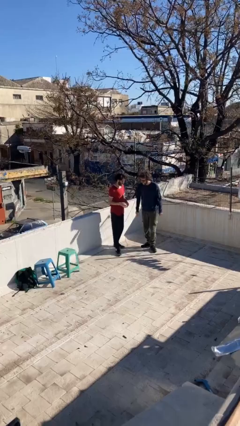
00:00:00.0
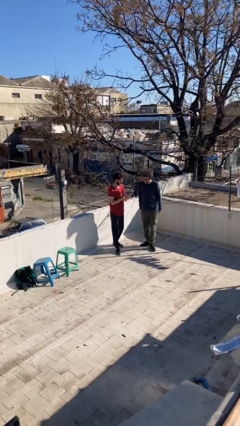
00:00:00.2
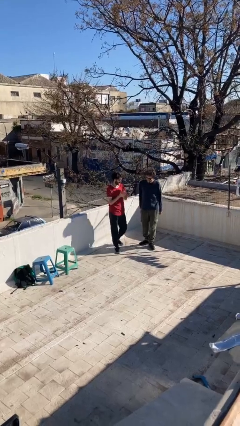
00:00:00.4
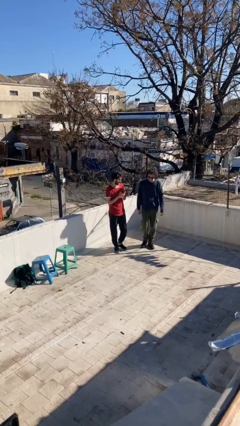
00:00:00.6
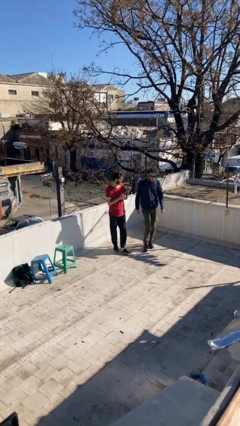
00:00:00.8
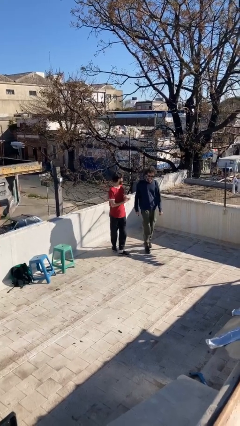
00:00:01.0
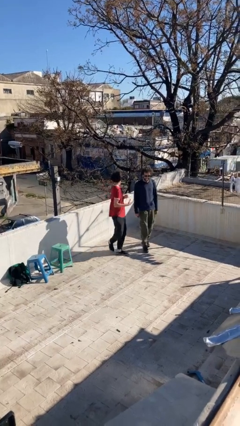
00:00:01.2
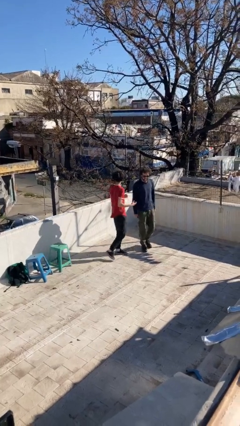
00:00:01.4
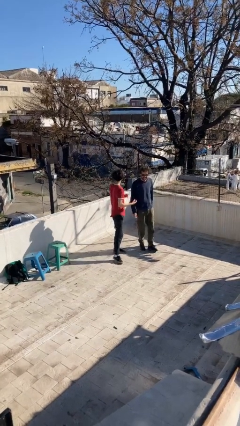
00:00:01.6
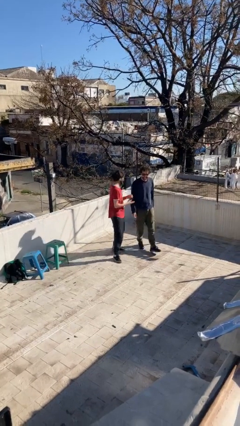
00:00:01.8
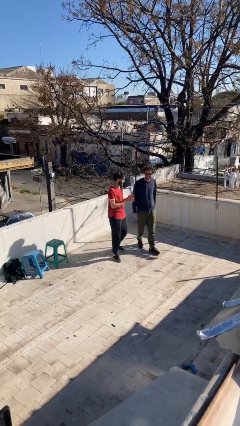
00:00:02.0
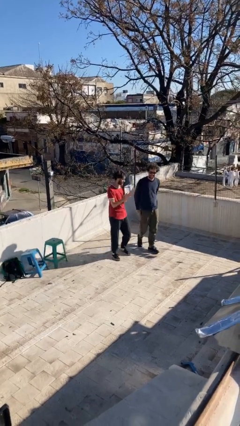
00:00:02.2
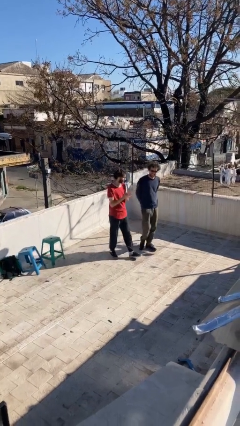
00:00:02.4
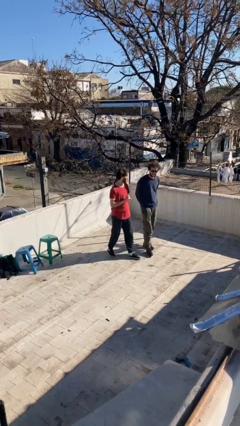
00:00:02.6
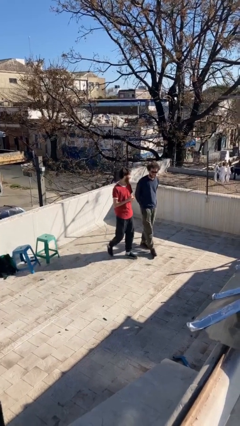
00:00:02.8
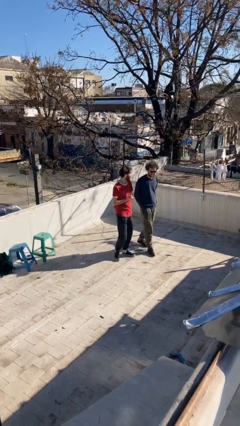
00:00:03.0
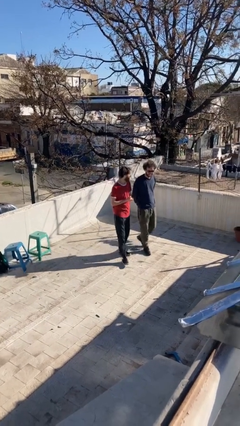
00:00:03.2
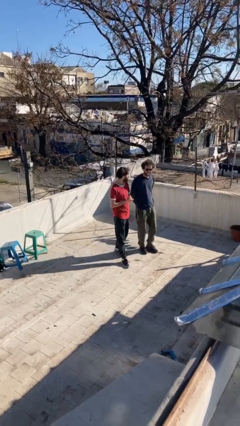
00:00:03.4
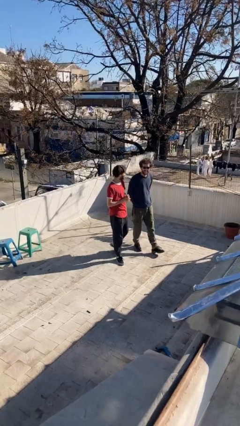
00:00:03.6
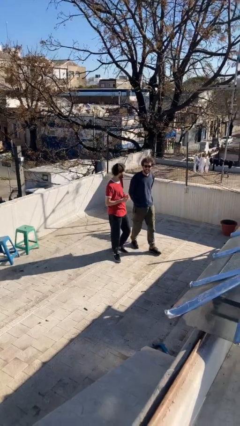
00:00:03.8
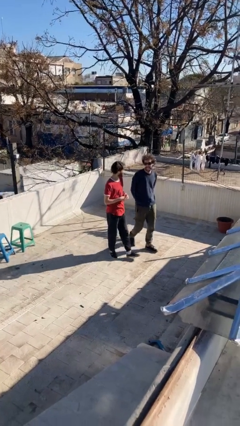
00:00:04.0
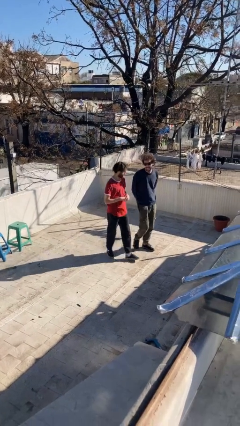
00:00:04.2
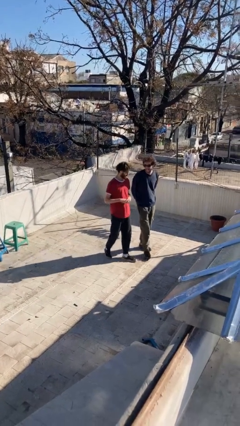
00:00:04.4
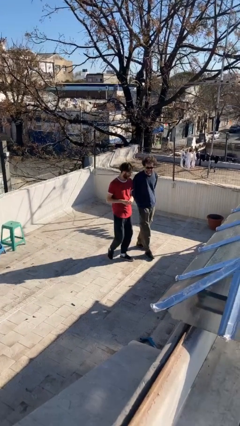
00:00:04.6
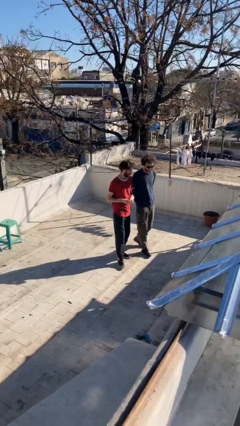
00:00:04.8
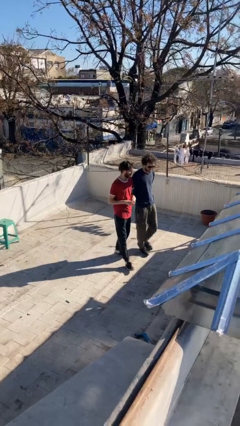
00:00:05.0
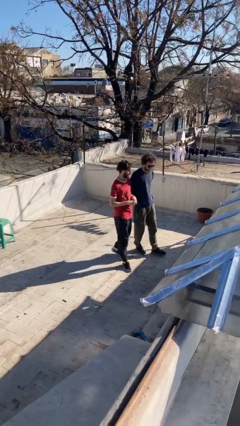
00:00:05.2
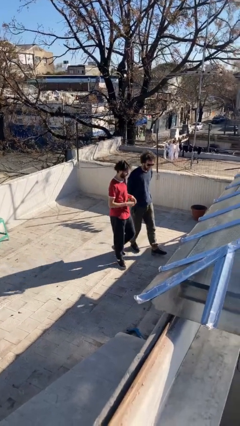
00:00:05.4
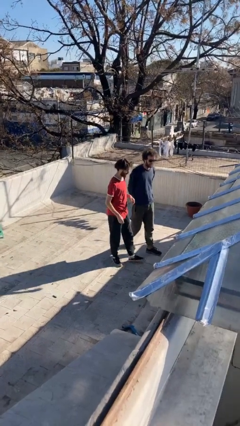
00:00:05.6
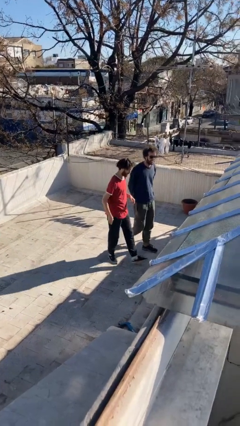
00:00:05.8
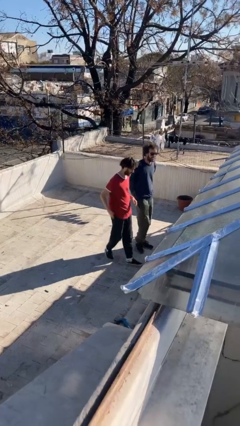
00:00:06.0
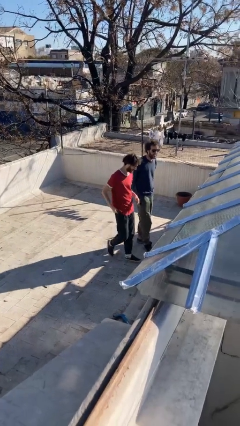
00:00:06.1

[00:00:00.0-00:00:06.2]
person talks to person

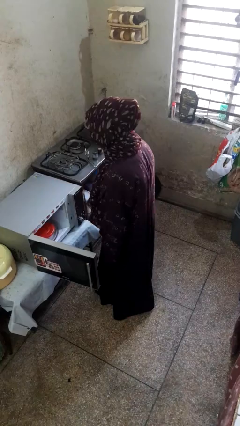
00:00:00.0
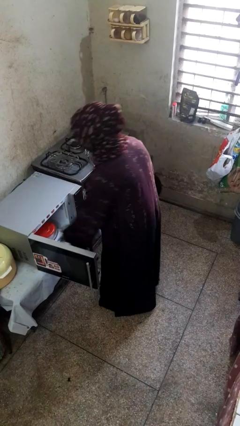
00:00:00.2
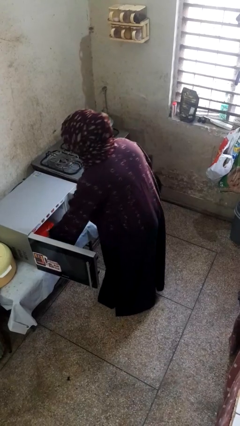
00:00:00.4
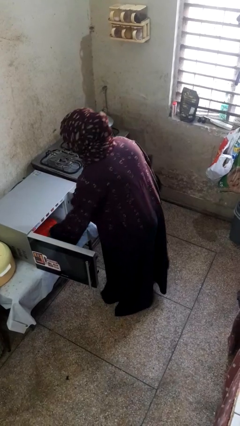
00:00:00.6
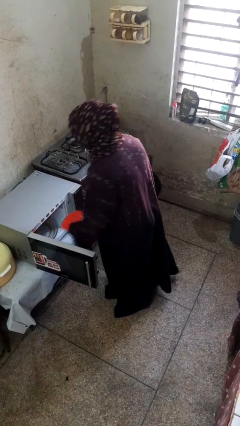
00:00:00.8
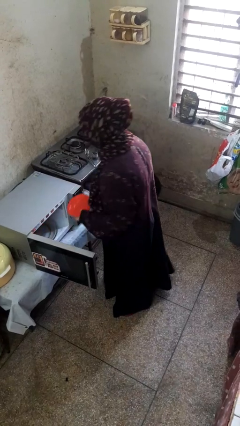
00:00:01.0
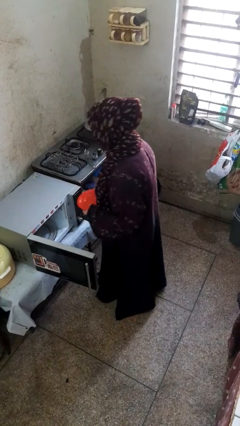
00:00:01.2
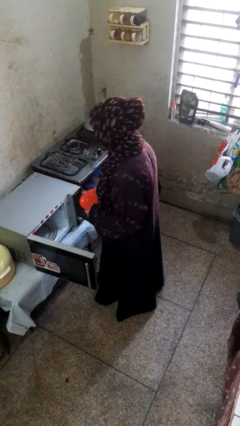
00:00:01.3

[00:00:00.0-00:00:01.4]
person takes object from microwave

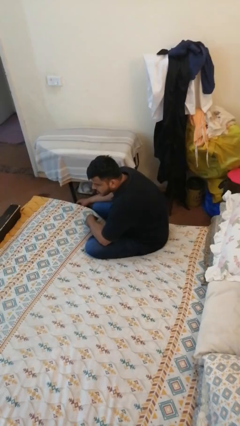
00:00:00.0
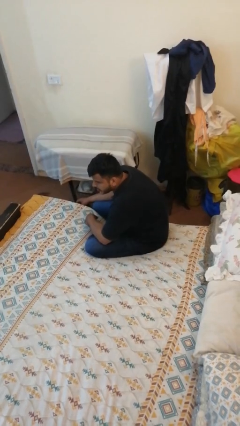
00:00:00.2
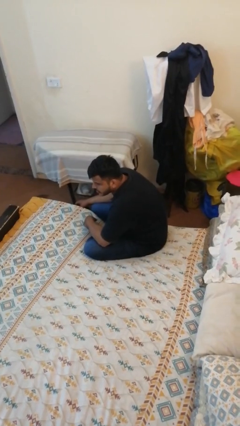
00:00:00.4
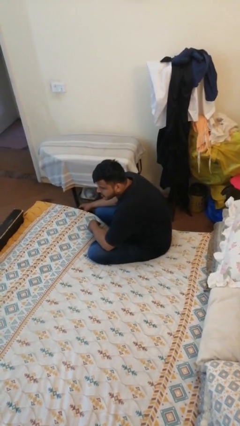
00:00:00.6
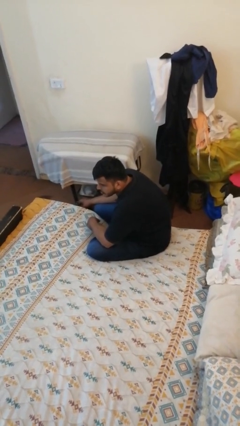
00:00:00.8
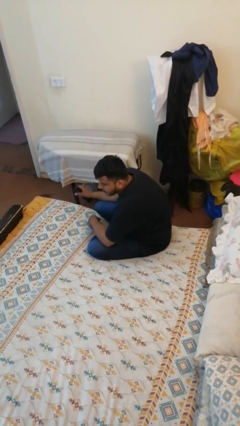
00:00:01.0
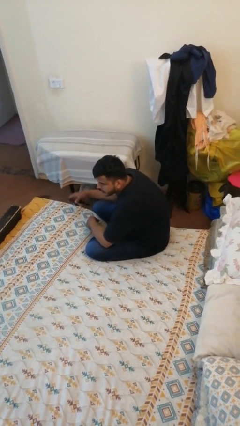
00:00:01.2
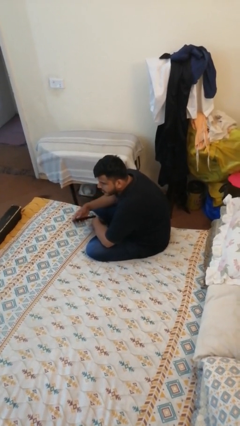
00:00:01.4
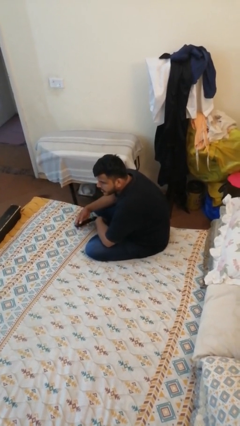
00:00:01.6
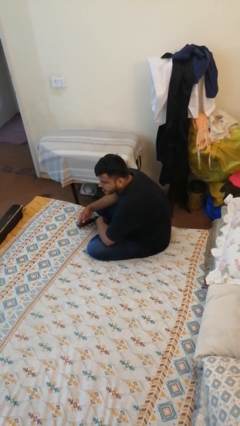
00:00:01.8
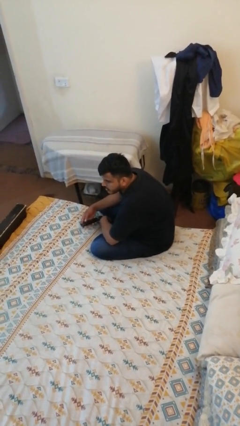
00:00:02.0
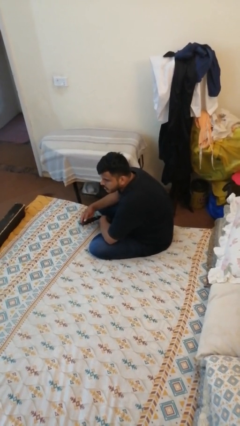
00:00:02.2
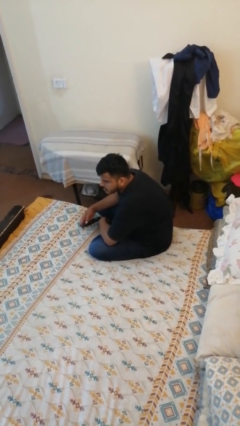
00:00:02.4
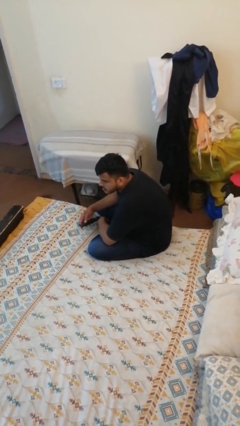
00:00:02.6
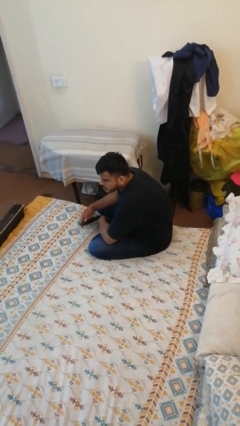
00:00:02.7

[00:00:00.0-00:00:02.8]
person uses television remote

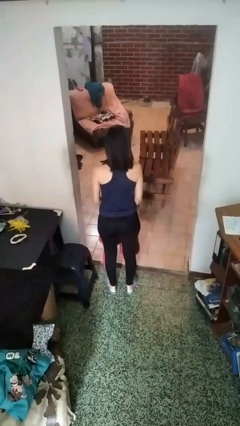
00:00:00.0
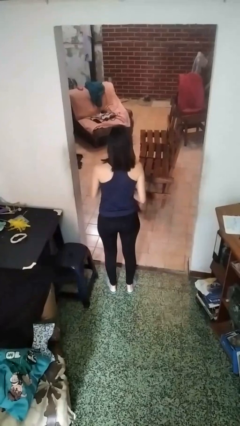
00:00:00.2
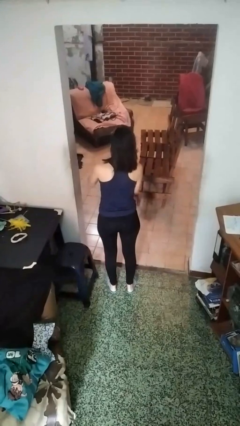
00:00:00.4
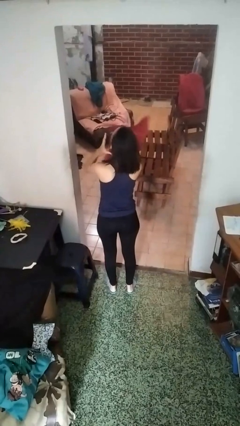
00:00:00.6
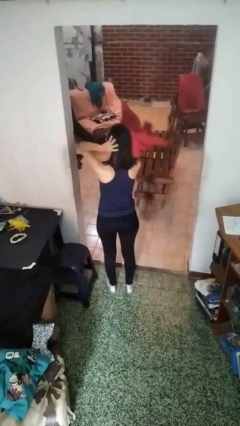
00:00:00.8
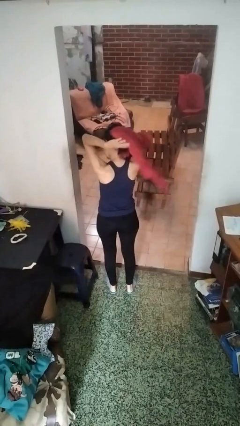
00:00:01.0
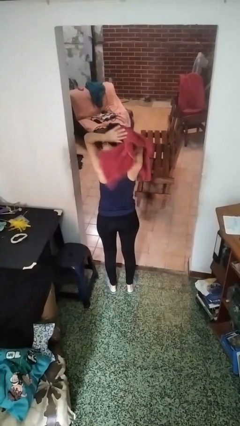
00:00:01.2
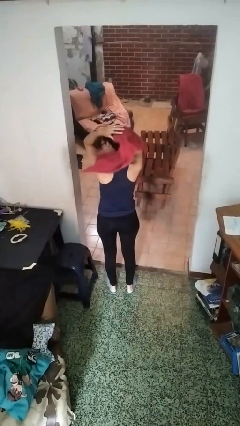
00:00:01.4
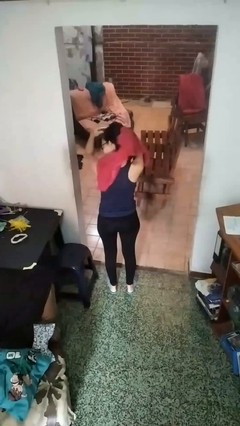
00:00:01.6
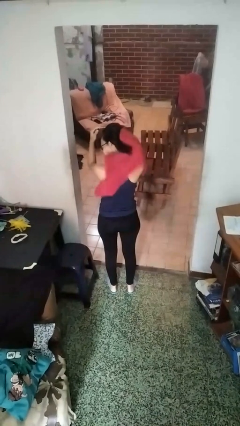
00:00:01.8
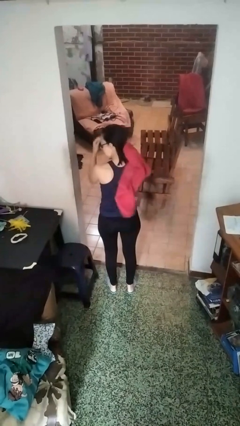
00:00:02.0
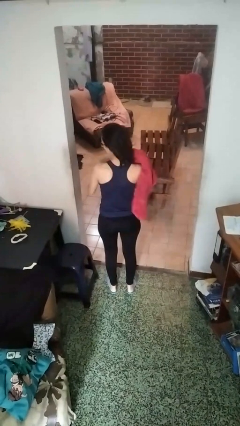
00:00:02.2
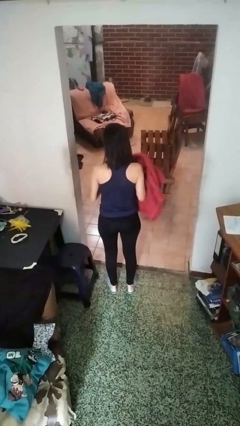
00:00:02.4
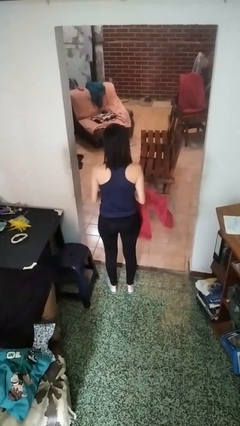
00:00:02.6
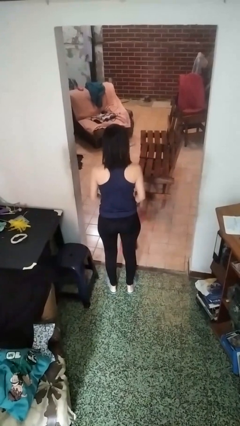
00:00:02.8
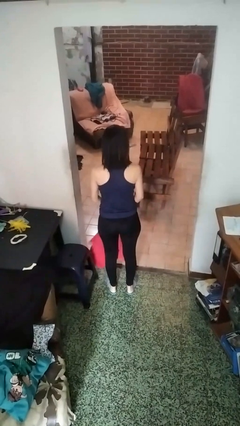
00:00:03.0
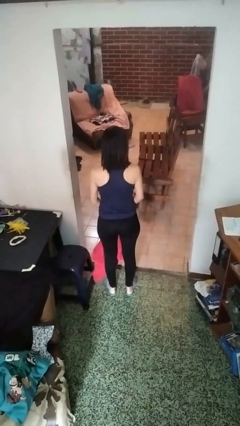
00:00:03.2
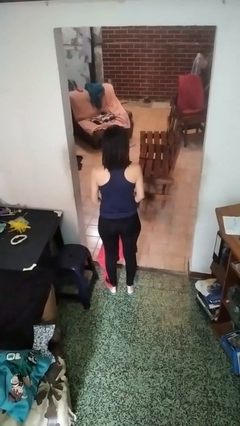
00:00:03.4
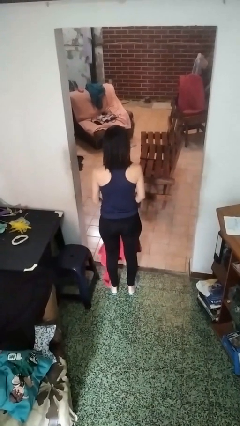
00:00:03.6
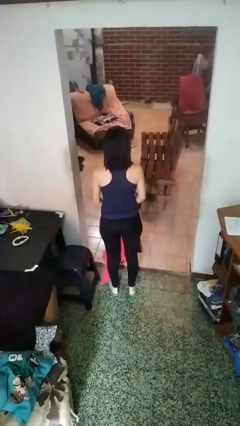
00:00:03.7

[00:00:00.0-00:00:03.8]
person dries hair with towel

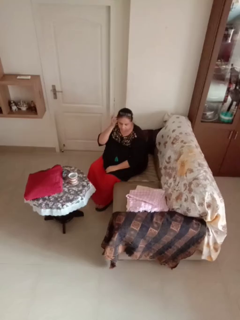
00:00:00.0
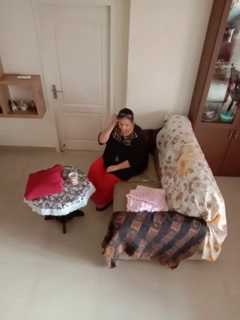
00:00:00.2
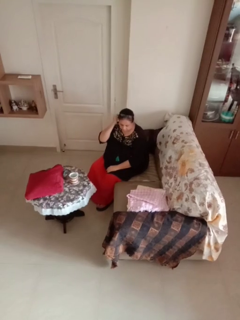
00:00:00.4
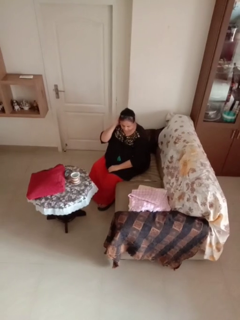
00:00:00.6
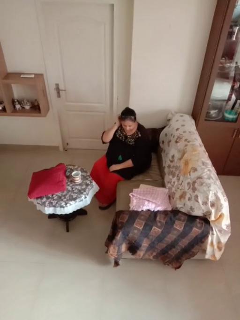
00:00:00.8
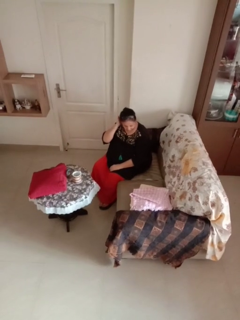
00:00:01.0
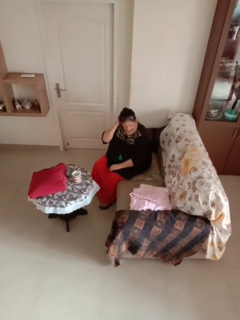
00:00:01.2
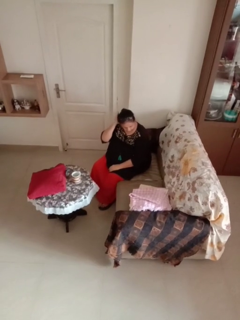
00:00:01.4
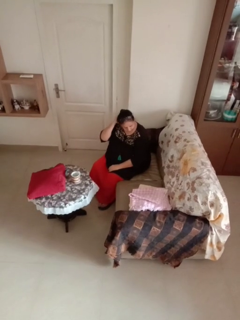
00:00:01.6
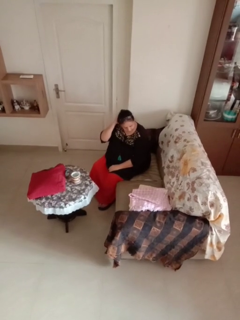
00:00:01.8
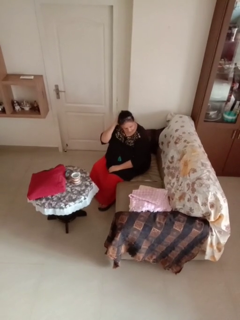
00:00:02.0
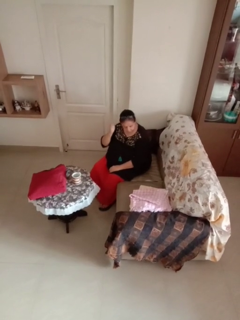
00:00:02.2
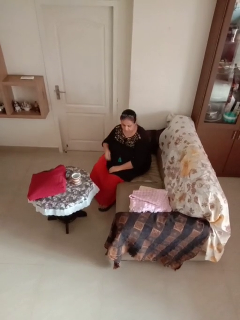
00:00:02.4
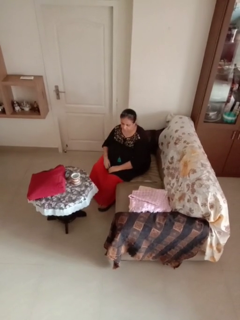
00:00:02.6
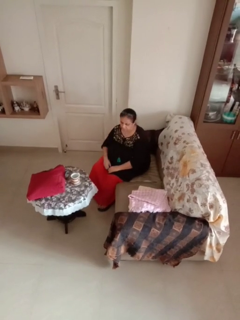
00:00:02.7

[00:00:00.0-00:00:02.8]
person strokes hair

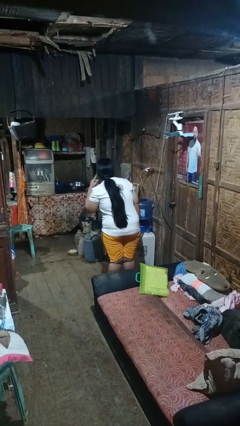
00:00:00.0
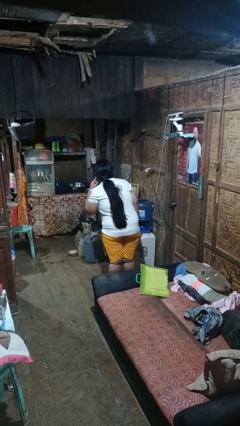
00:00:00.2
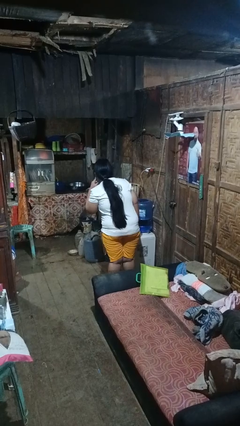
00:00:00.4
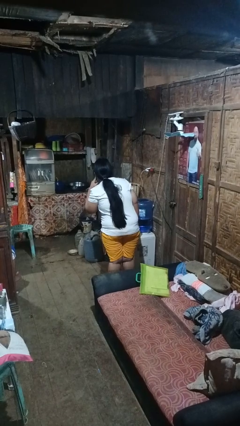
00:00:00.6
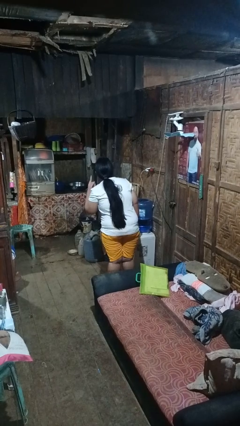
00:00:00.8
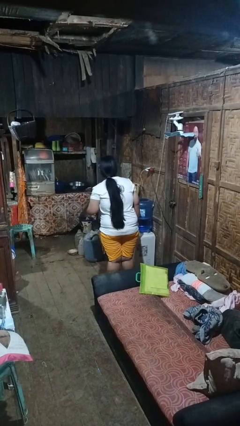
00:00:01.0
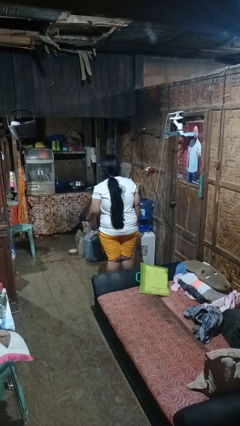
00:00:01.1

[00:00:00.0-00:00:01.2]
person gestures listen closely
